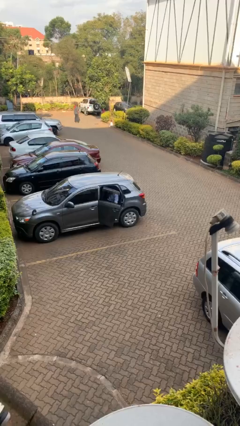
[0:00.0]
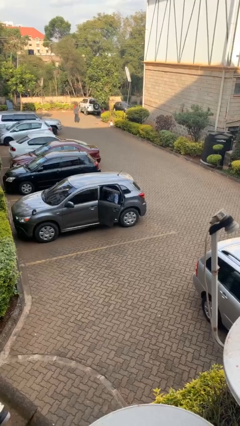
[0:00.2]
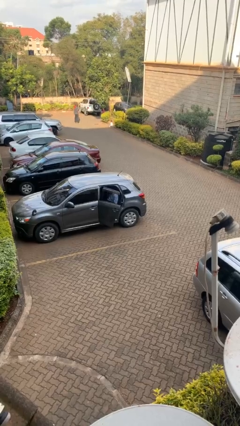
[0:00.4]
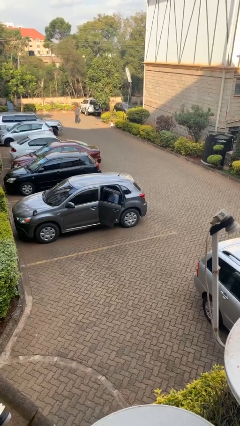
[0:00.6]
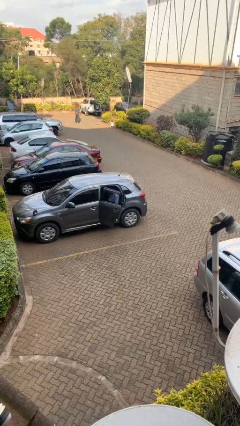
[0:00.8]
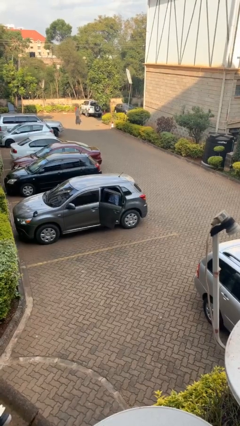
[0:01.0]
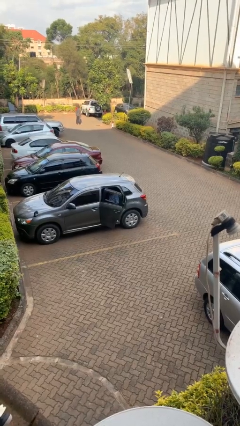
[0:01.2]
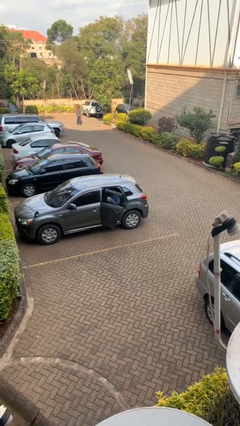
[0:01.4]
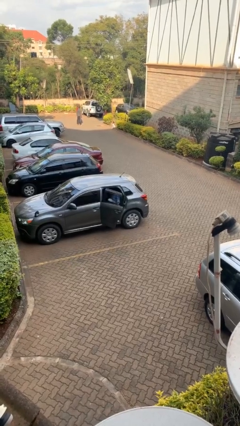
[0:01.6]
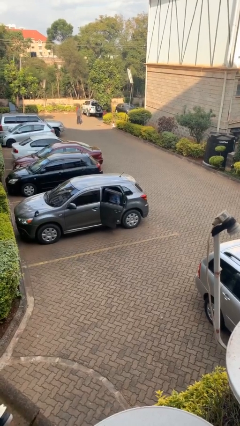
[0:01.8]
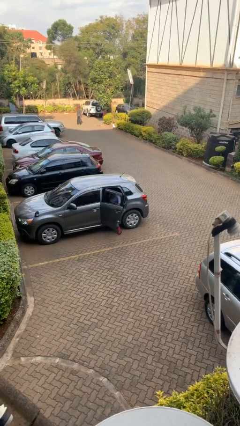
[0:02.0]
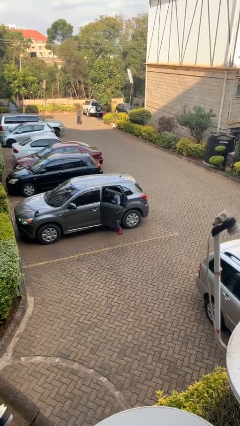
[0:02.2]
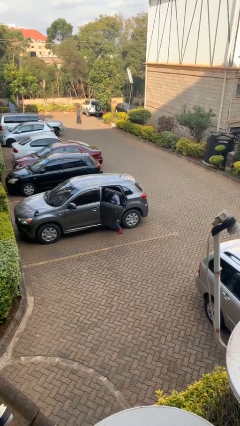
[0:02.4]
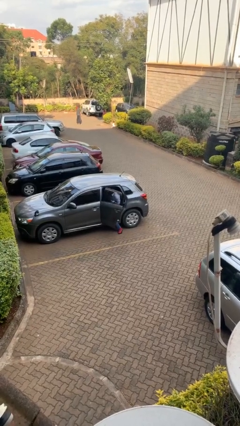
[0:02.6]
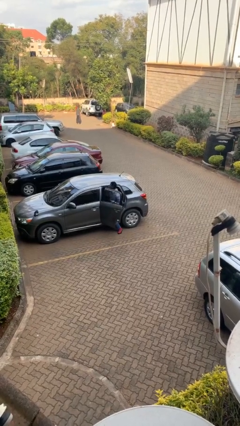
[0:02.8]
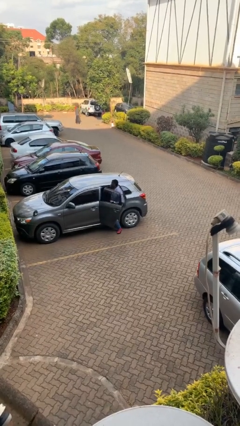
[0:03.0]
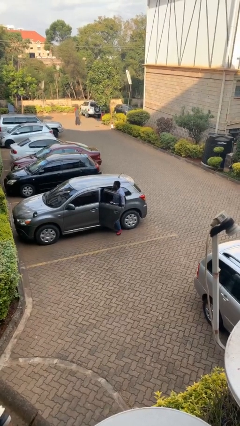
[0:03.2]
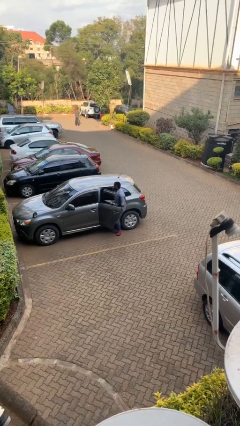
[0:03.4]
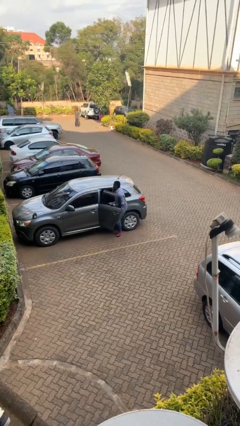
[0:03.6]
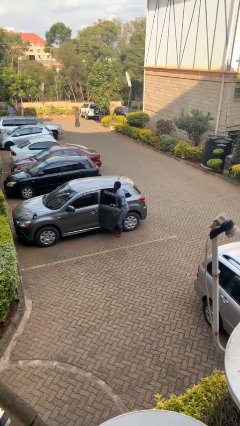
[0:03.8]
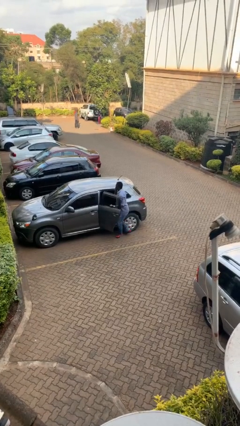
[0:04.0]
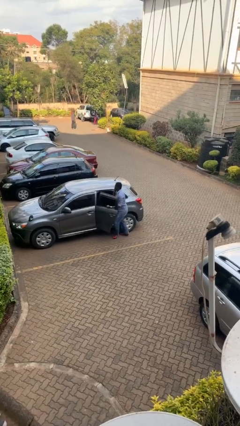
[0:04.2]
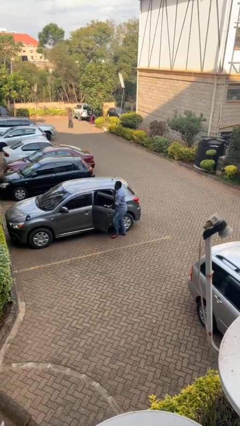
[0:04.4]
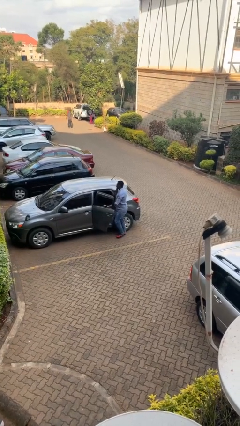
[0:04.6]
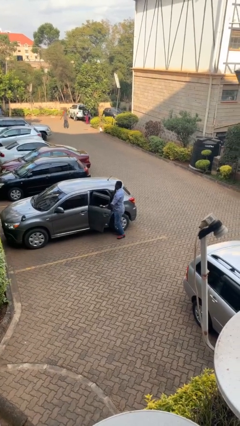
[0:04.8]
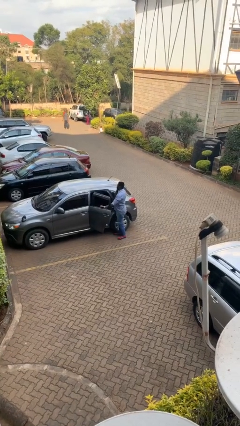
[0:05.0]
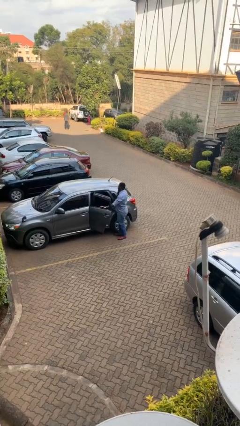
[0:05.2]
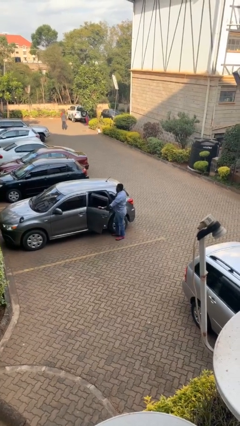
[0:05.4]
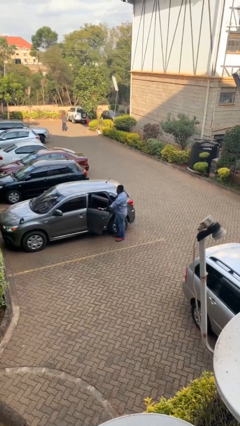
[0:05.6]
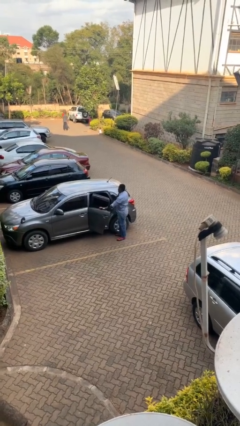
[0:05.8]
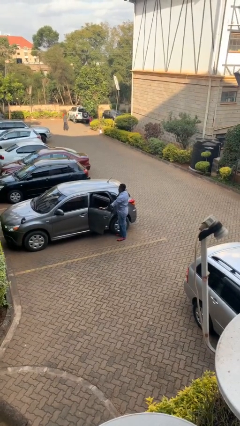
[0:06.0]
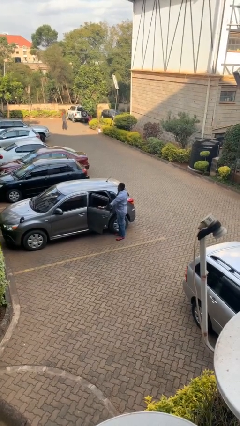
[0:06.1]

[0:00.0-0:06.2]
person exits car

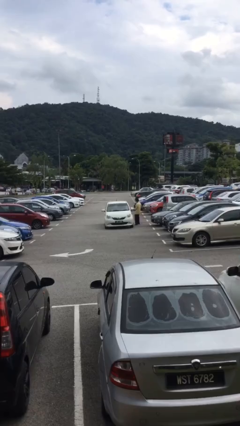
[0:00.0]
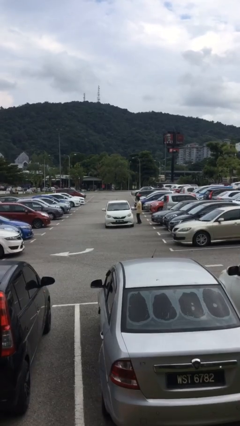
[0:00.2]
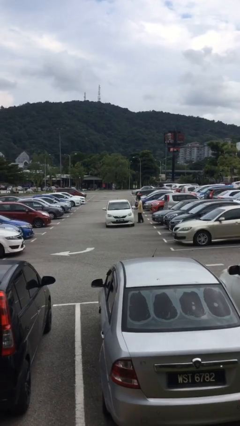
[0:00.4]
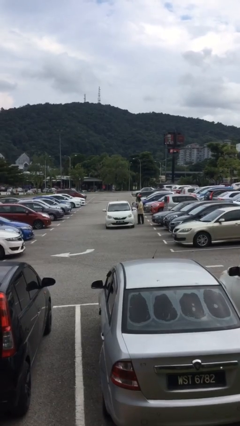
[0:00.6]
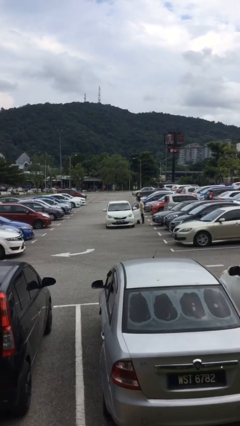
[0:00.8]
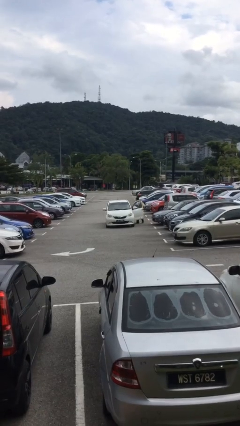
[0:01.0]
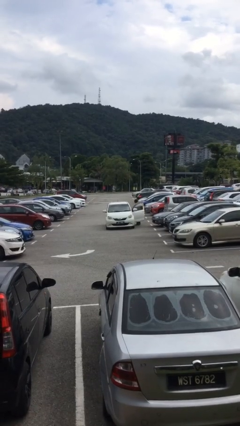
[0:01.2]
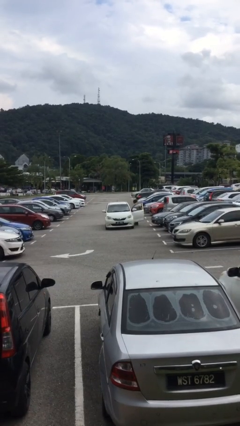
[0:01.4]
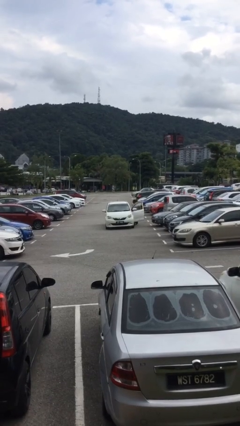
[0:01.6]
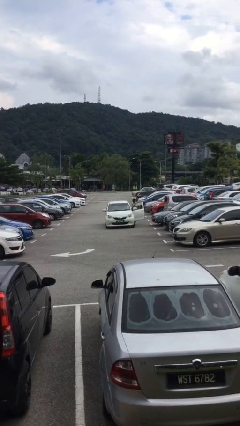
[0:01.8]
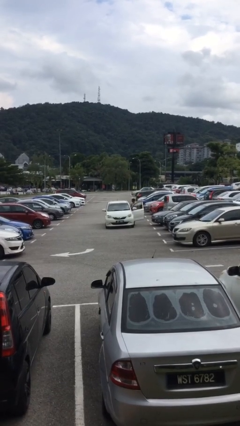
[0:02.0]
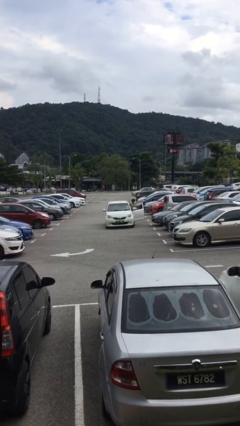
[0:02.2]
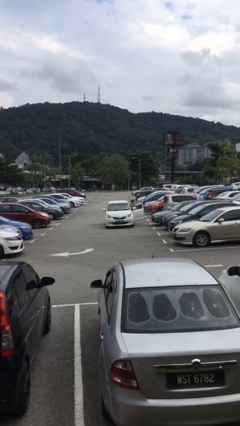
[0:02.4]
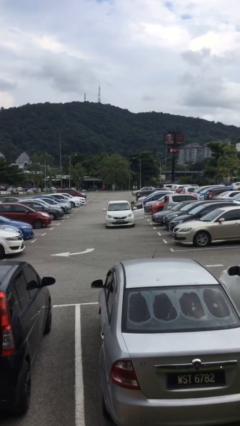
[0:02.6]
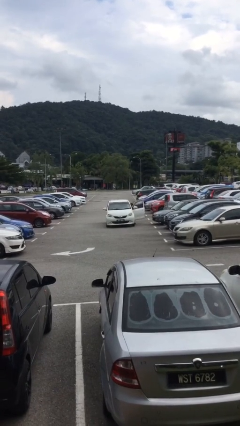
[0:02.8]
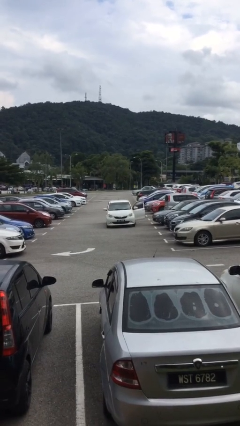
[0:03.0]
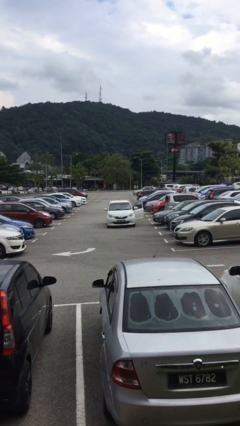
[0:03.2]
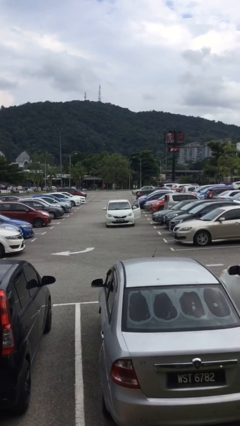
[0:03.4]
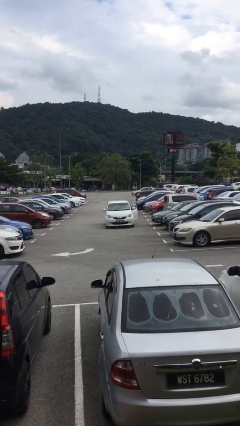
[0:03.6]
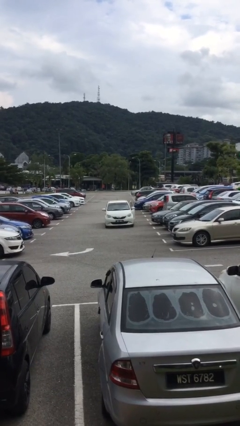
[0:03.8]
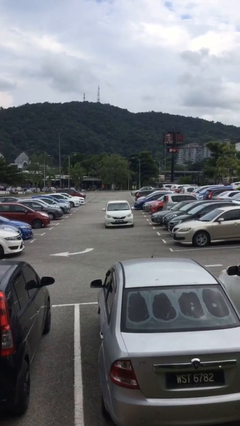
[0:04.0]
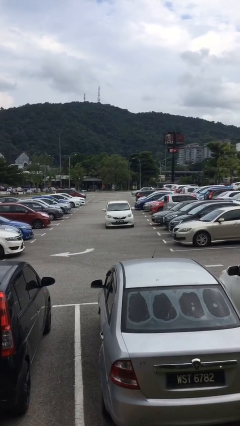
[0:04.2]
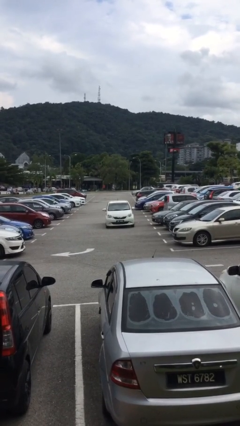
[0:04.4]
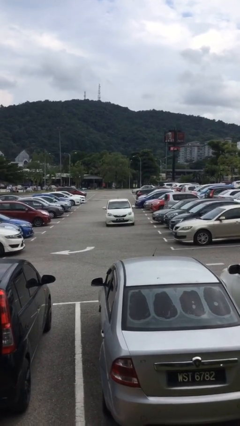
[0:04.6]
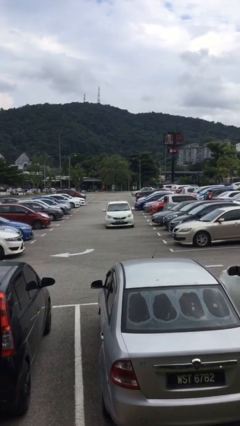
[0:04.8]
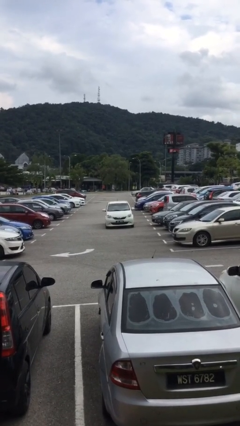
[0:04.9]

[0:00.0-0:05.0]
car picks up person

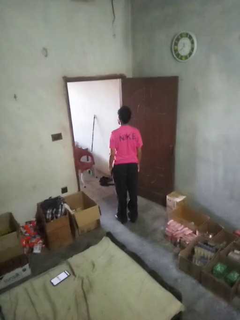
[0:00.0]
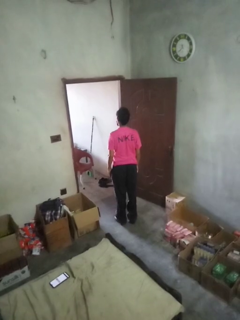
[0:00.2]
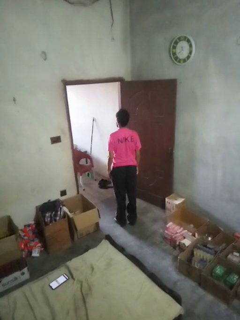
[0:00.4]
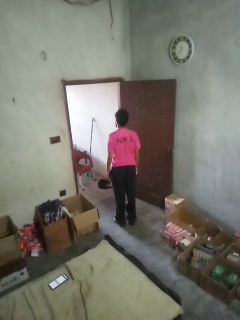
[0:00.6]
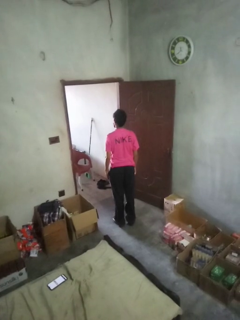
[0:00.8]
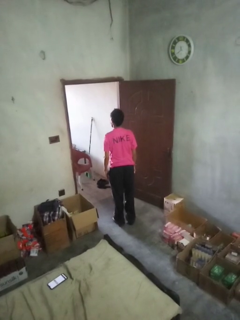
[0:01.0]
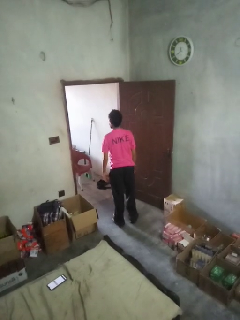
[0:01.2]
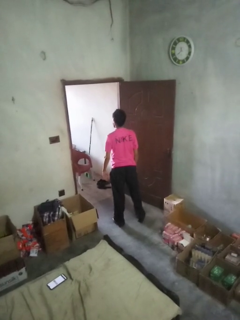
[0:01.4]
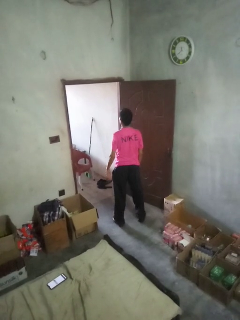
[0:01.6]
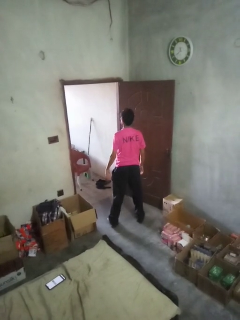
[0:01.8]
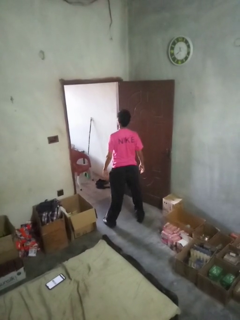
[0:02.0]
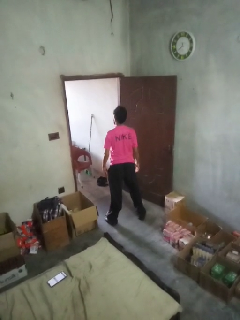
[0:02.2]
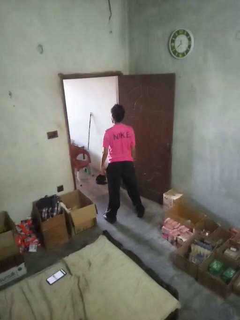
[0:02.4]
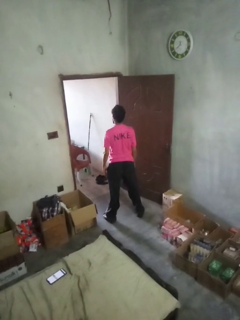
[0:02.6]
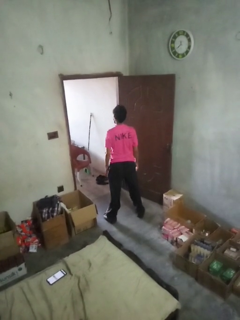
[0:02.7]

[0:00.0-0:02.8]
person stretches back

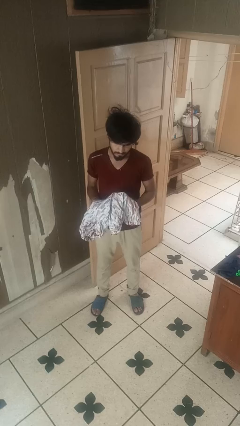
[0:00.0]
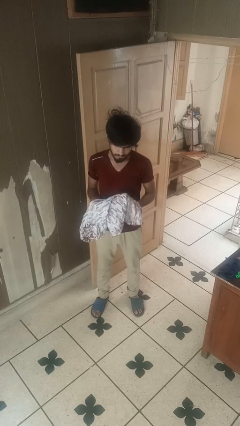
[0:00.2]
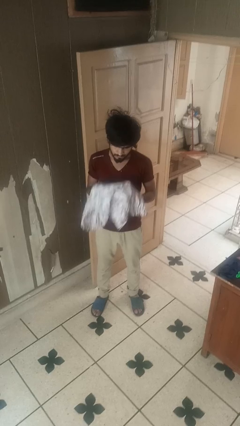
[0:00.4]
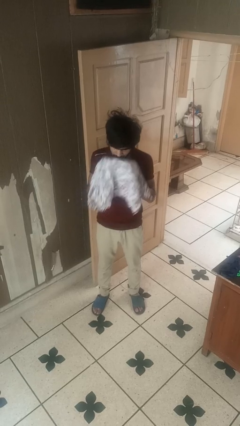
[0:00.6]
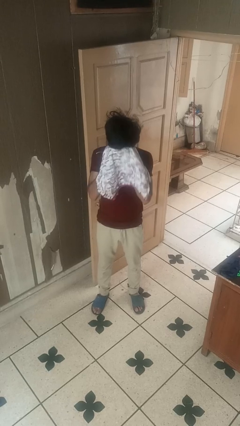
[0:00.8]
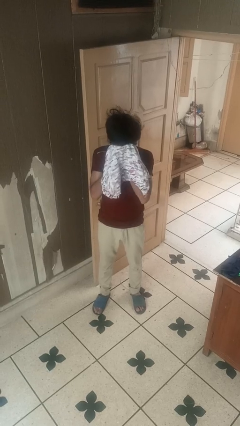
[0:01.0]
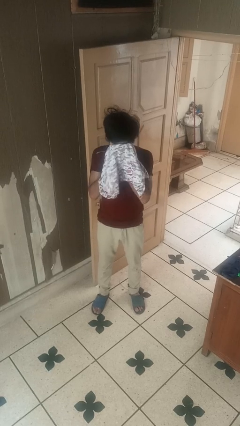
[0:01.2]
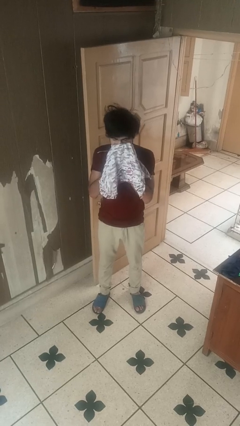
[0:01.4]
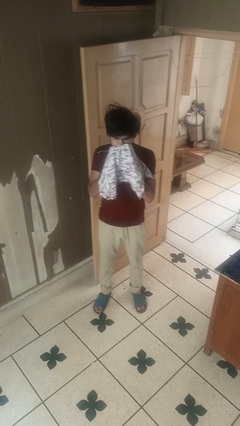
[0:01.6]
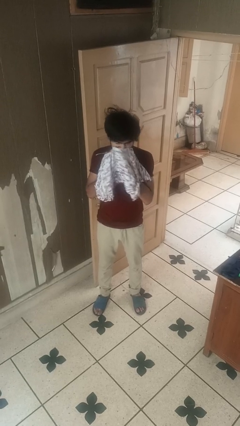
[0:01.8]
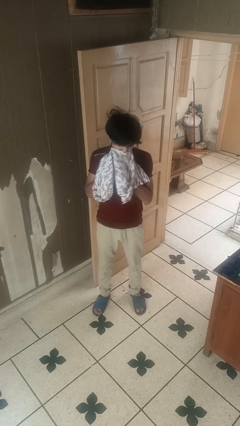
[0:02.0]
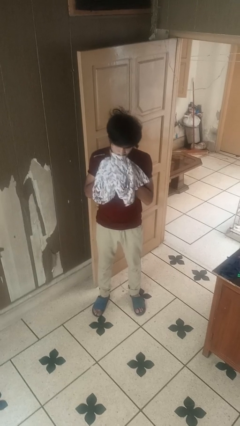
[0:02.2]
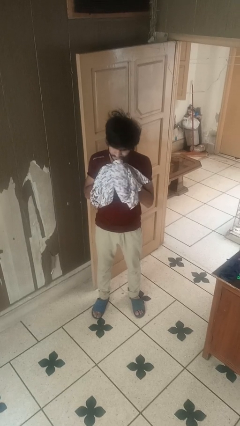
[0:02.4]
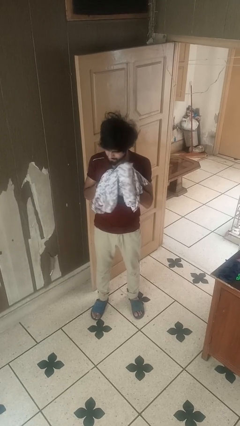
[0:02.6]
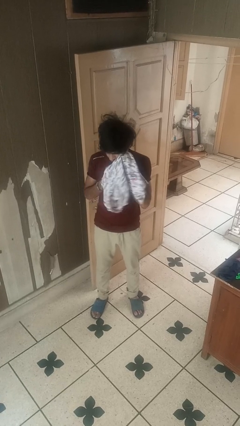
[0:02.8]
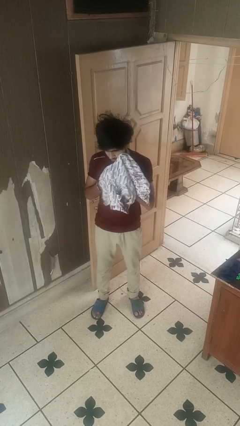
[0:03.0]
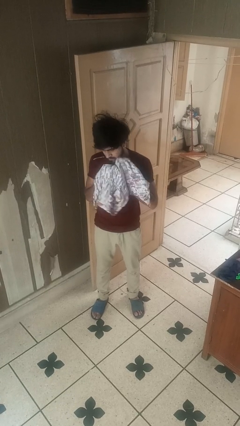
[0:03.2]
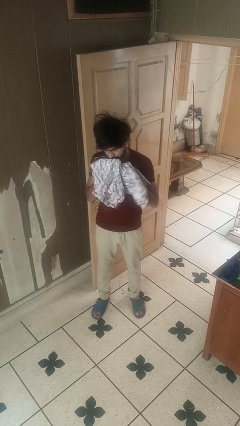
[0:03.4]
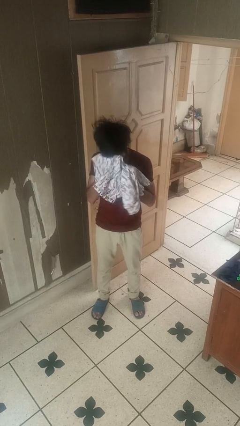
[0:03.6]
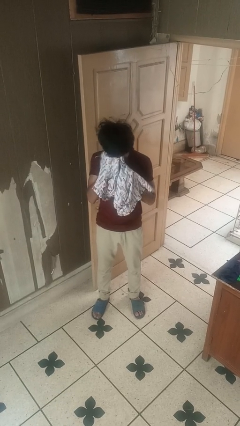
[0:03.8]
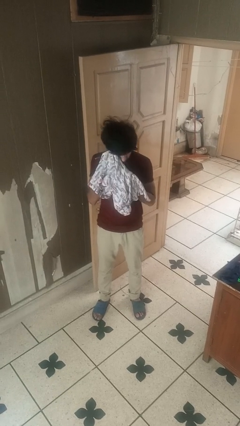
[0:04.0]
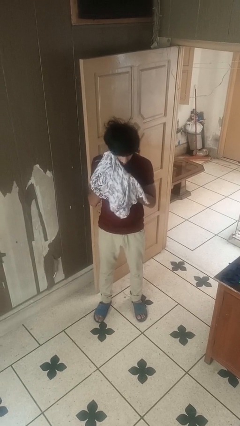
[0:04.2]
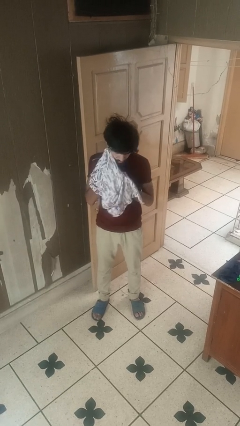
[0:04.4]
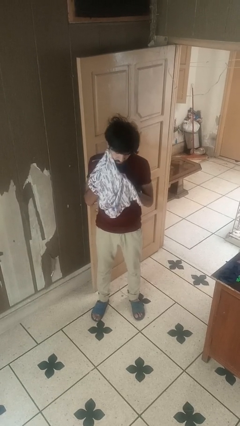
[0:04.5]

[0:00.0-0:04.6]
person wipes mouth with napkin
